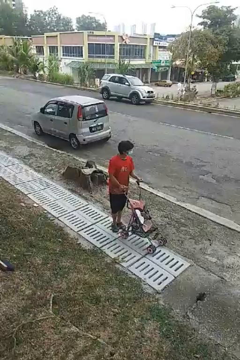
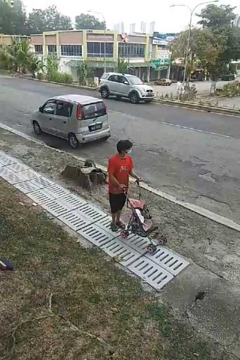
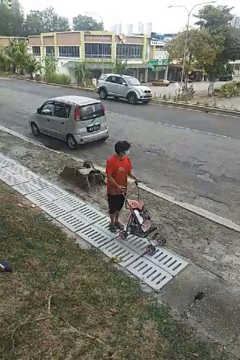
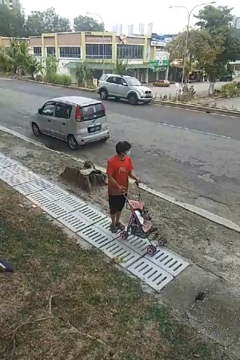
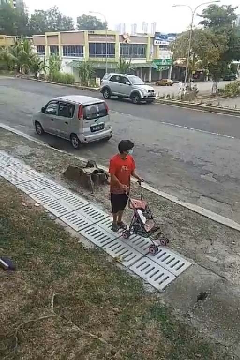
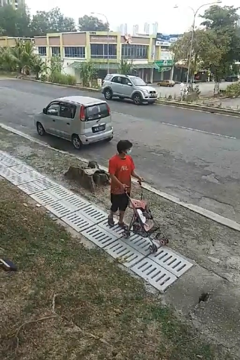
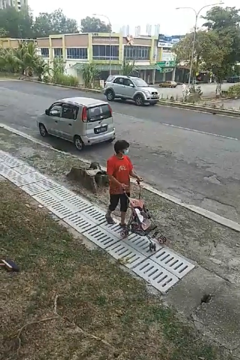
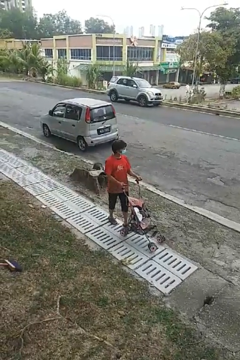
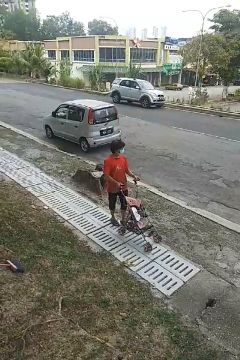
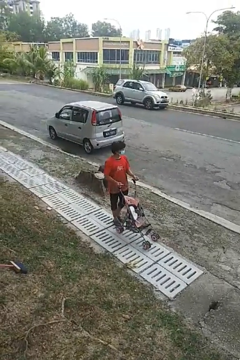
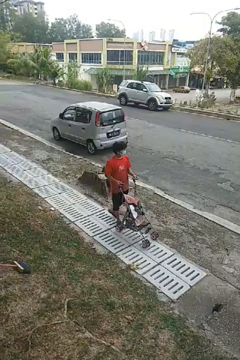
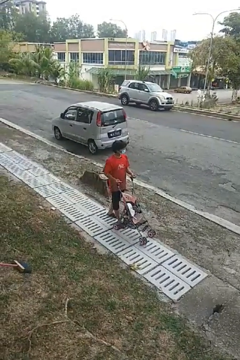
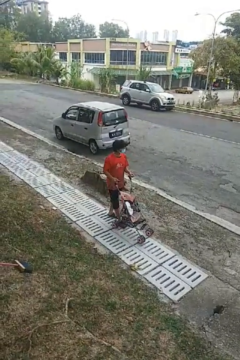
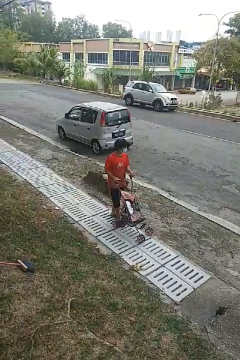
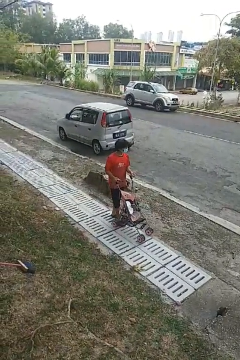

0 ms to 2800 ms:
person pulls wheeled cart

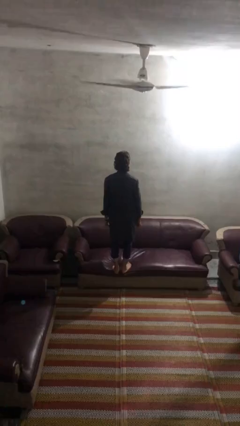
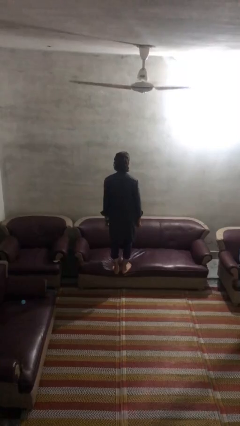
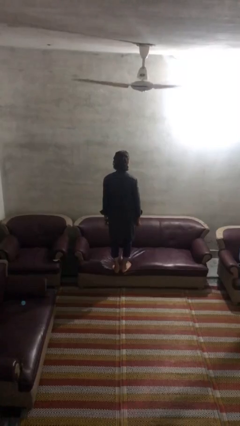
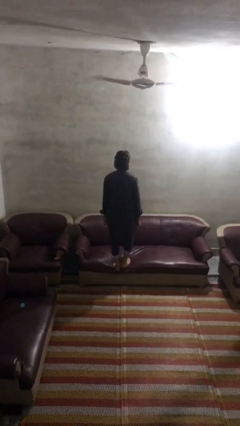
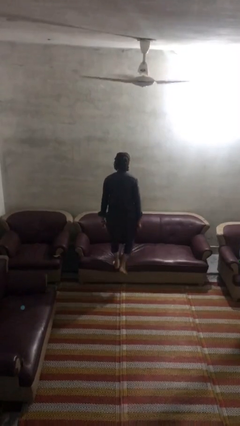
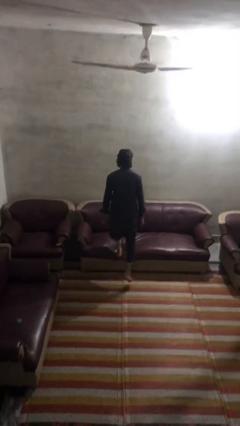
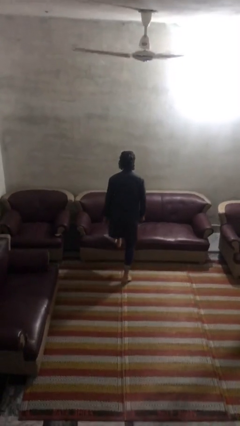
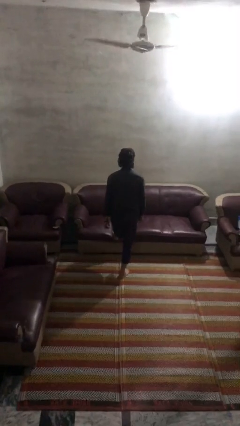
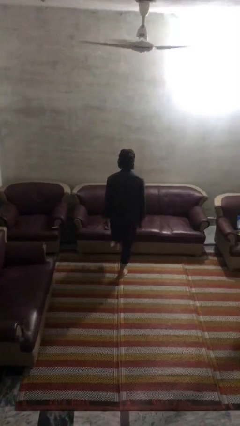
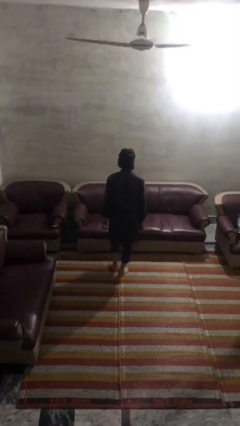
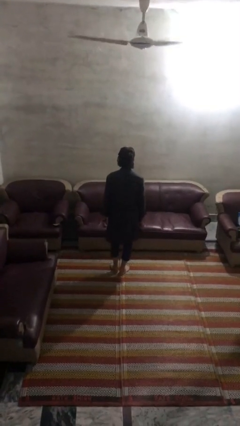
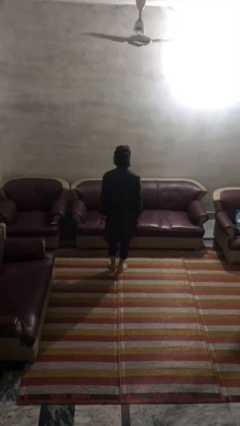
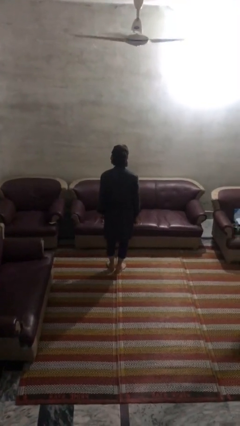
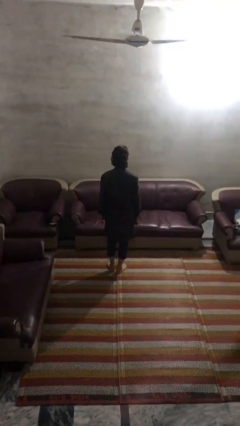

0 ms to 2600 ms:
person climbs off couch

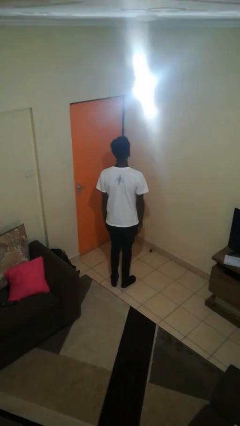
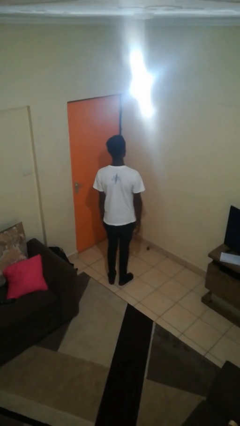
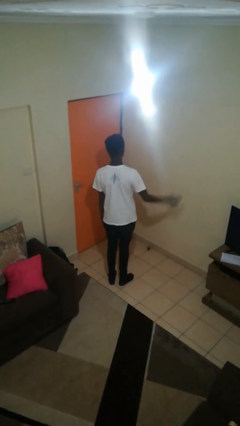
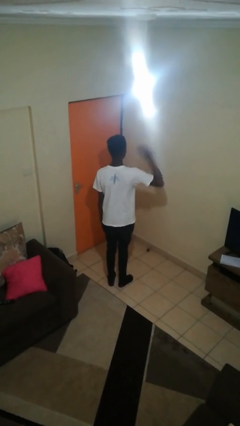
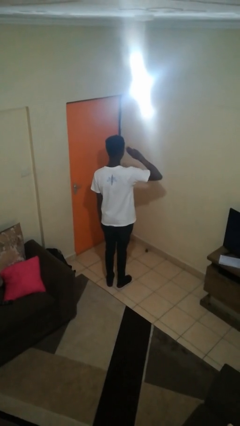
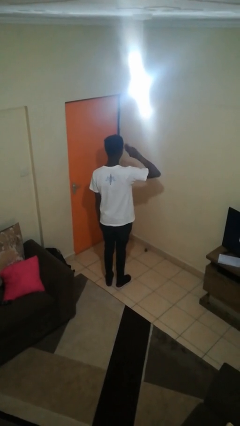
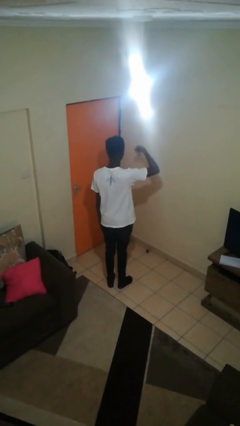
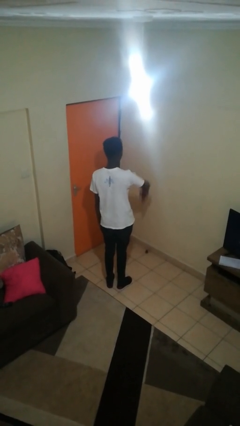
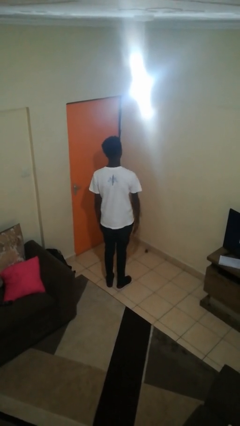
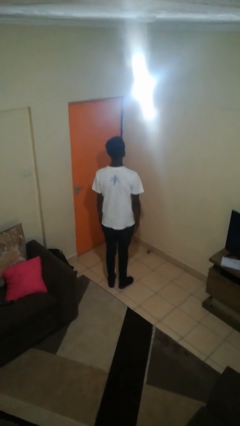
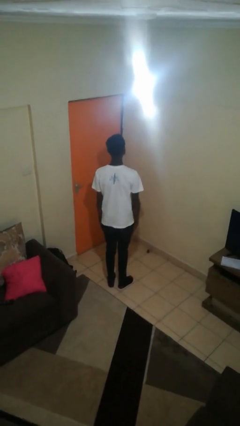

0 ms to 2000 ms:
person salutes

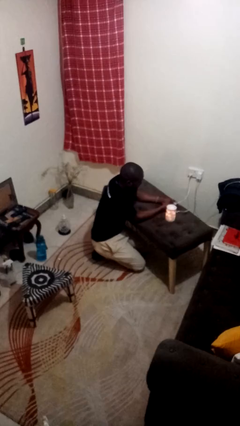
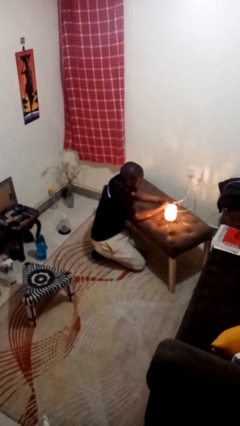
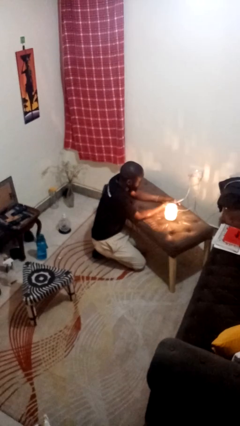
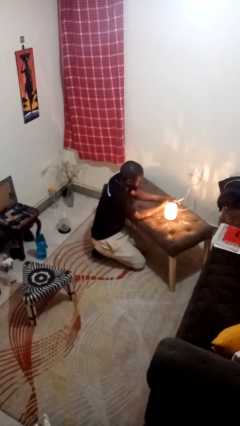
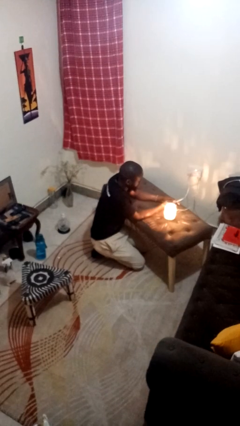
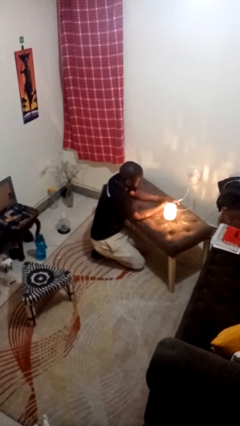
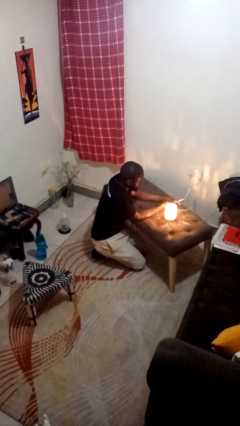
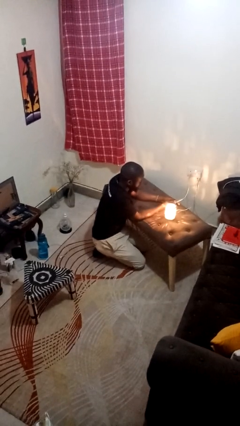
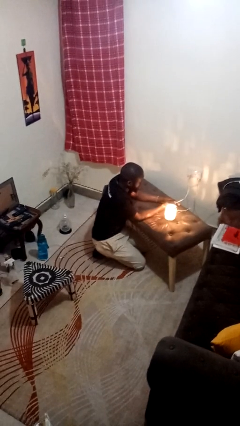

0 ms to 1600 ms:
person turns on lamp

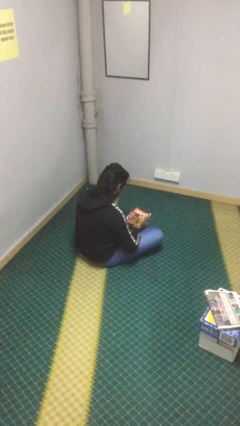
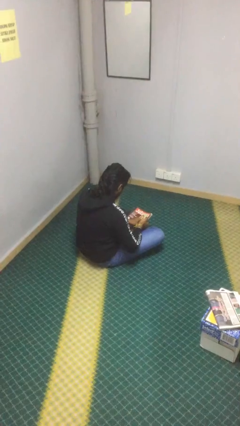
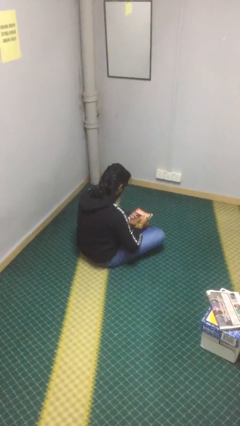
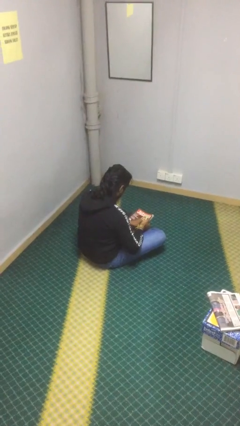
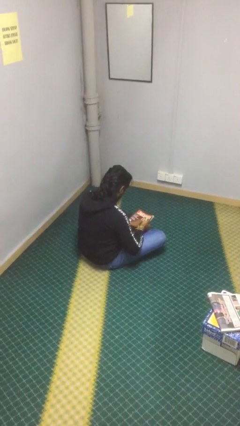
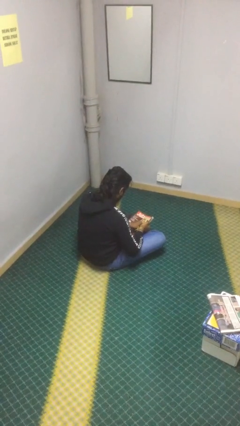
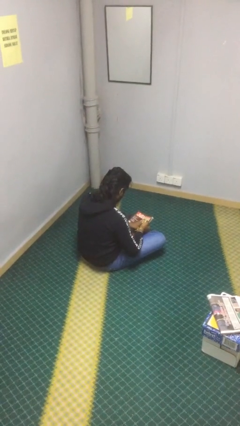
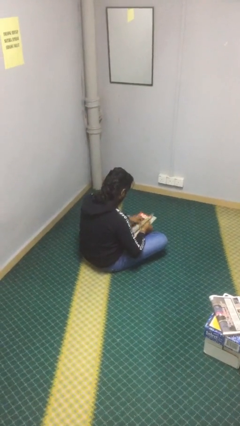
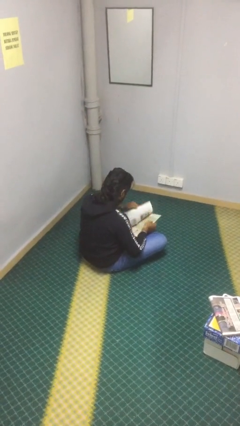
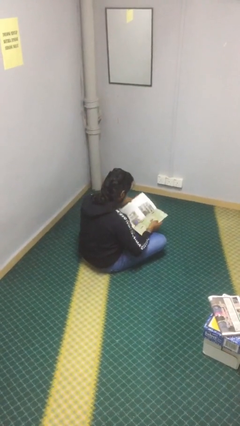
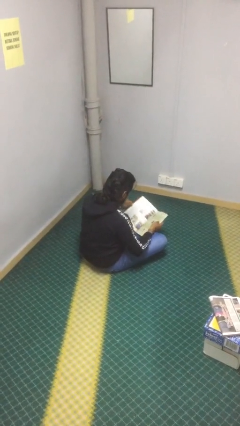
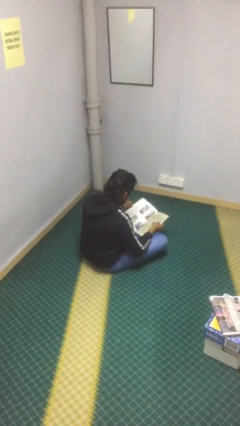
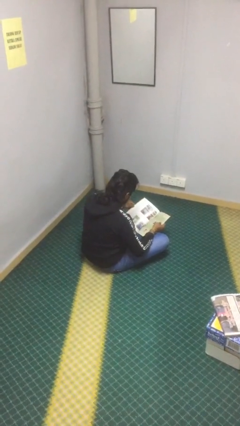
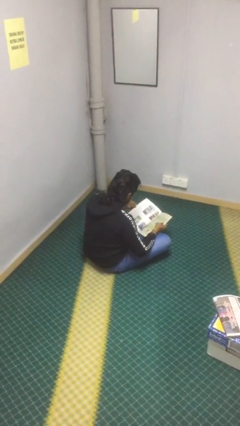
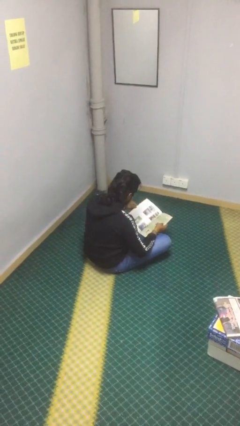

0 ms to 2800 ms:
person reads magazine

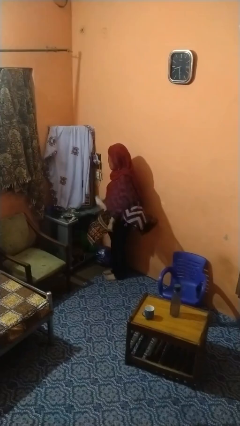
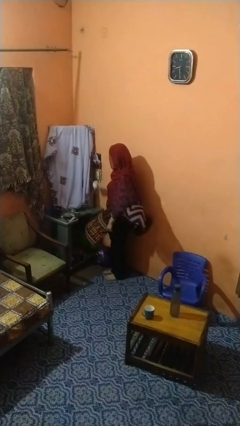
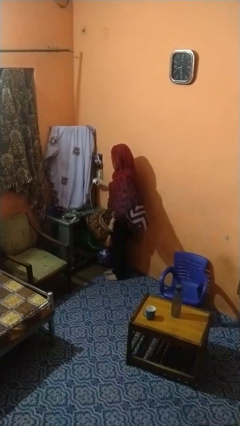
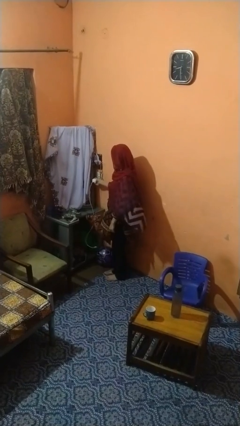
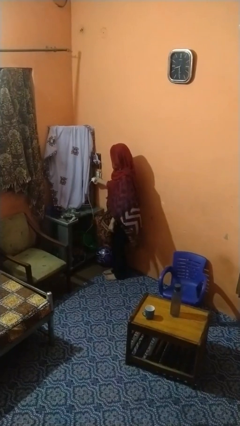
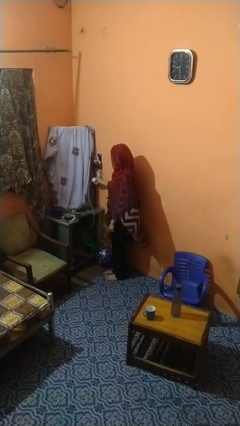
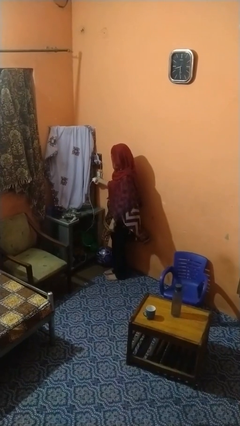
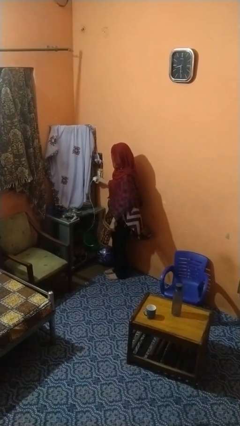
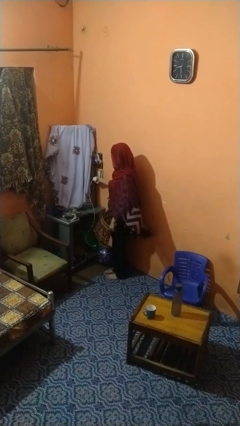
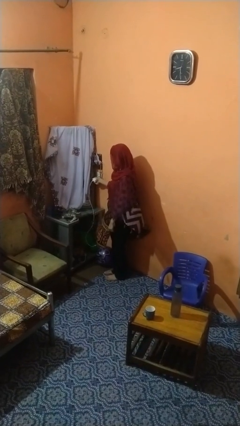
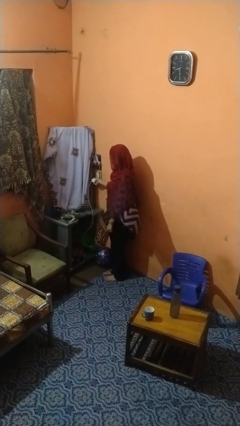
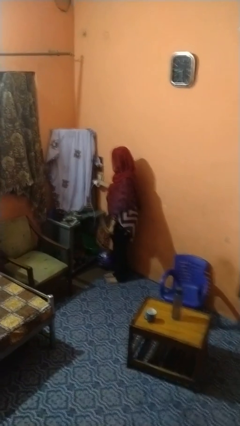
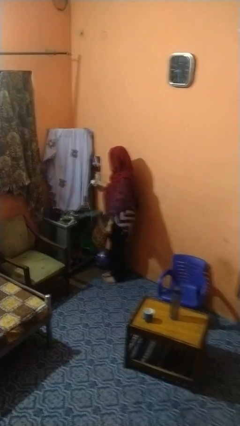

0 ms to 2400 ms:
person plugs into electrical socket

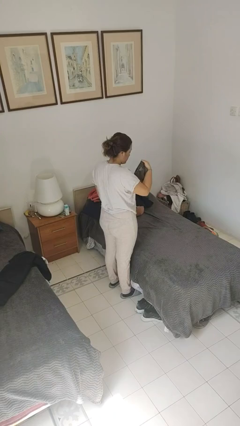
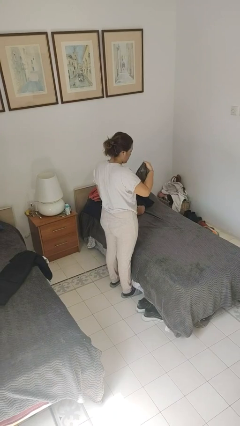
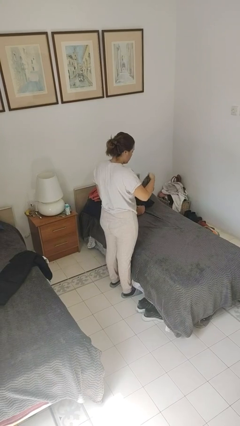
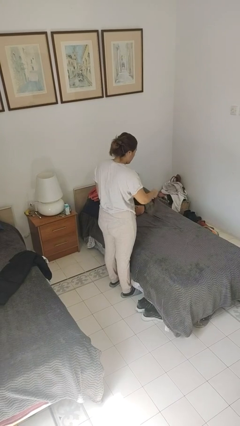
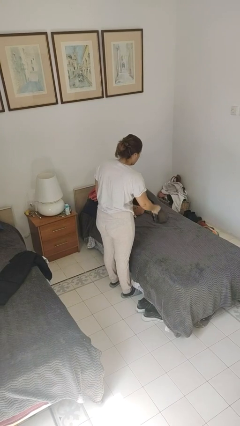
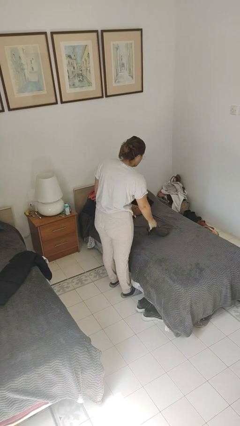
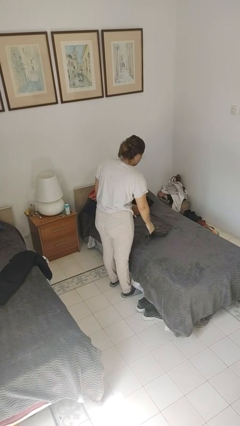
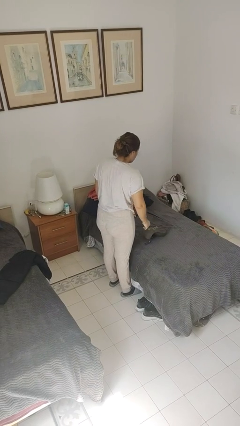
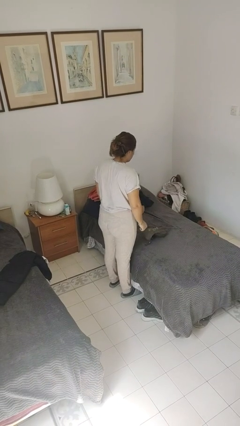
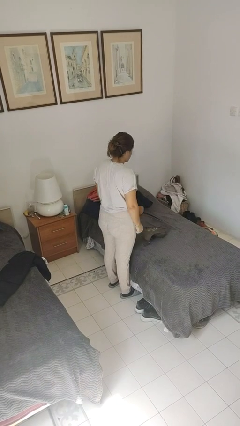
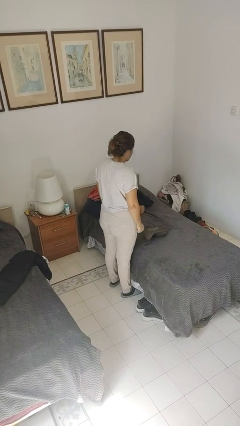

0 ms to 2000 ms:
person puts down object on bed

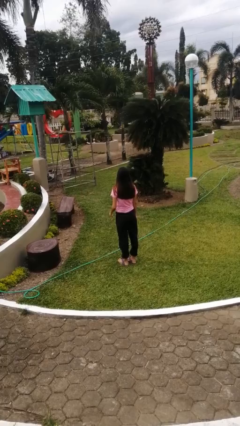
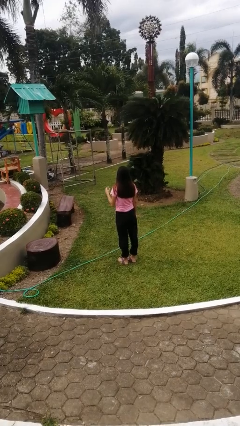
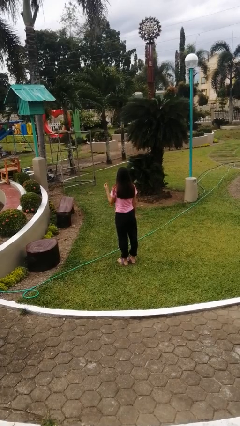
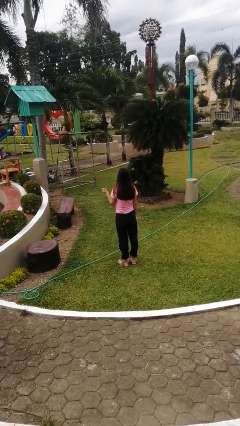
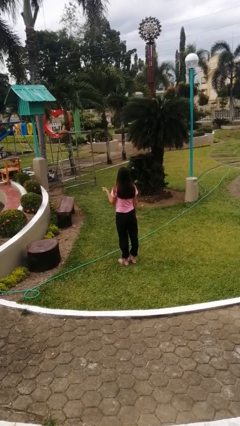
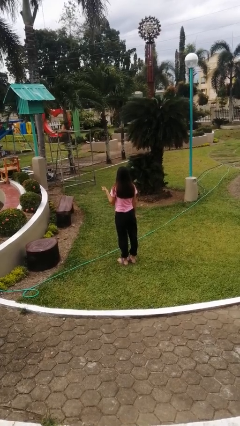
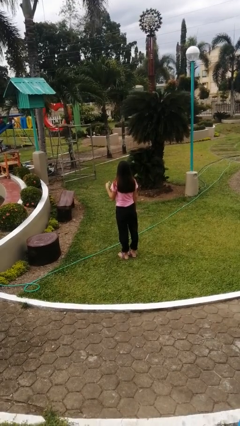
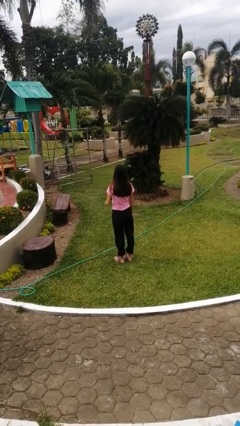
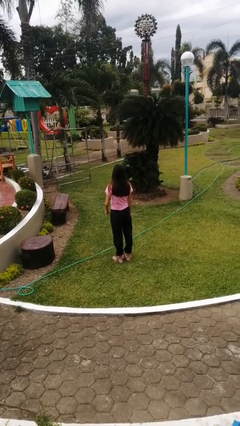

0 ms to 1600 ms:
person snaps fingers
